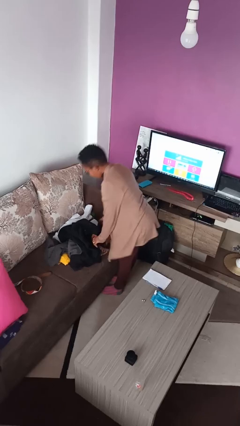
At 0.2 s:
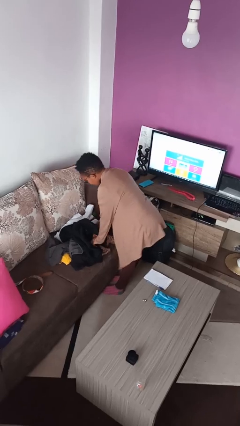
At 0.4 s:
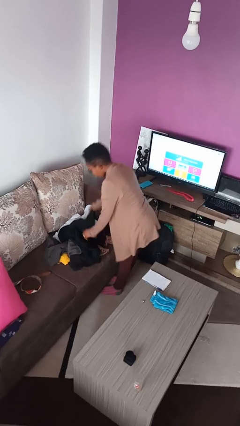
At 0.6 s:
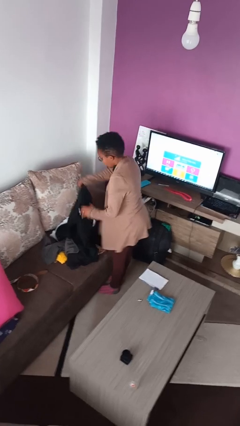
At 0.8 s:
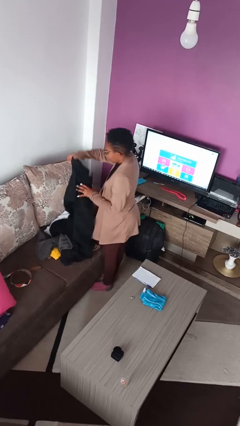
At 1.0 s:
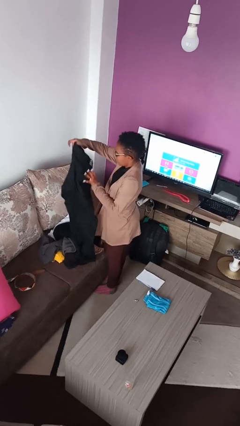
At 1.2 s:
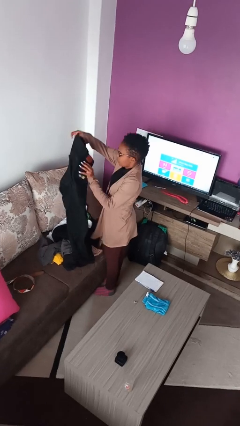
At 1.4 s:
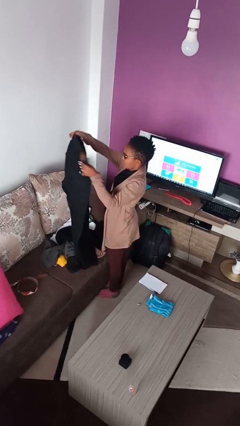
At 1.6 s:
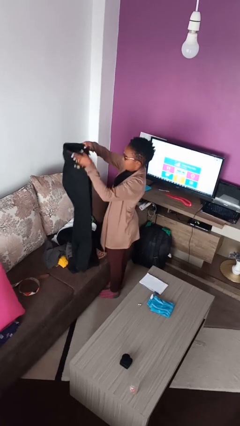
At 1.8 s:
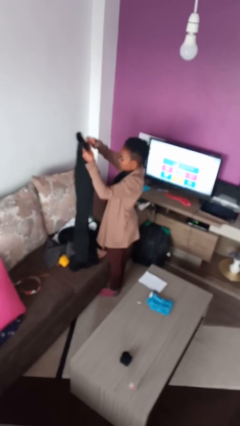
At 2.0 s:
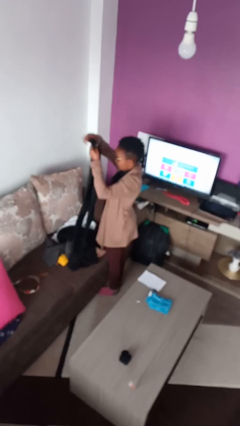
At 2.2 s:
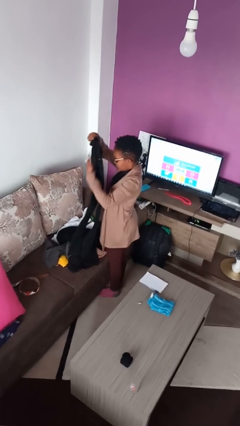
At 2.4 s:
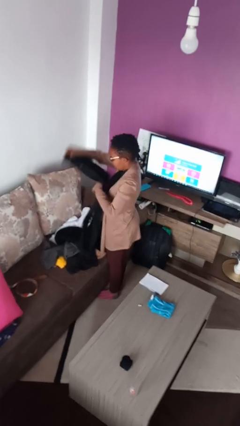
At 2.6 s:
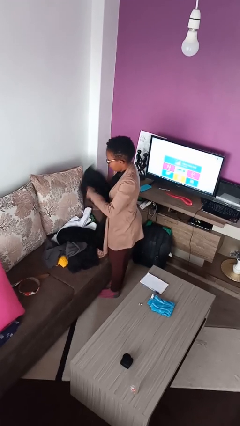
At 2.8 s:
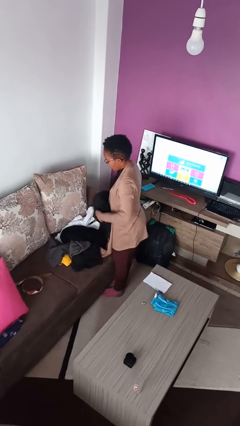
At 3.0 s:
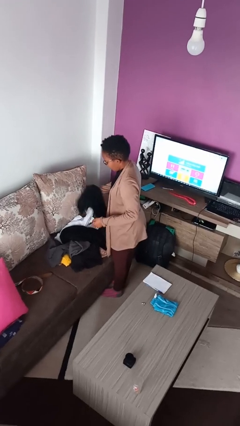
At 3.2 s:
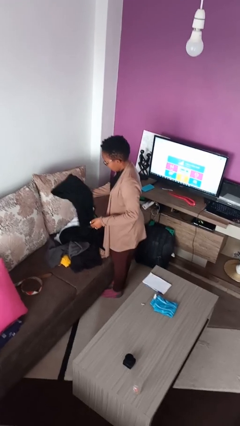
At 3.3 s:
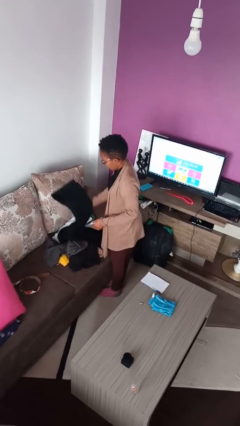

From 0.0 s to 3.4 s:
person folds pants

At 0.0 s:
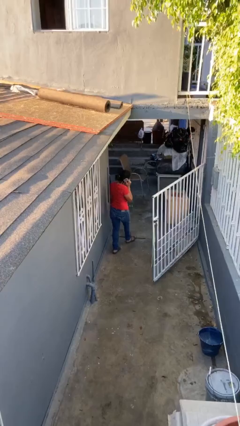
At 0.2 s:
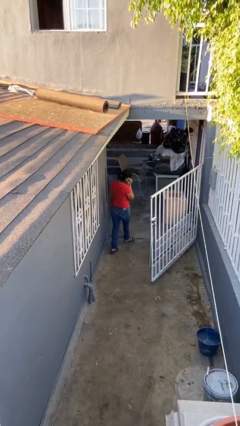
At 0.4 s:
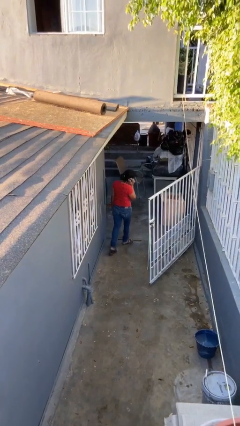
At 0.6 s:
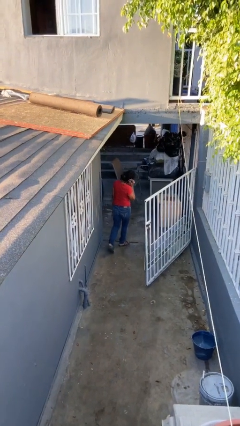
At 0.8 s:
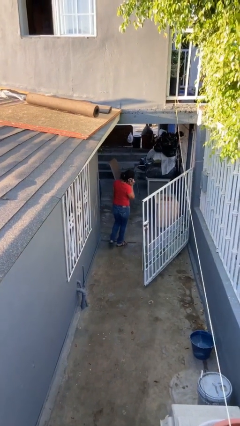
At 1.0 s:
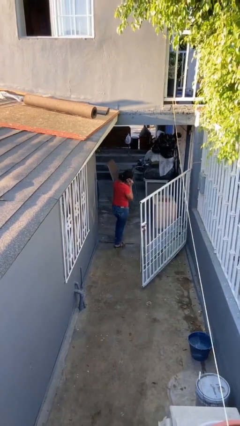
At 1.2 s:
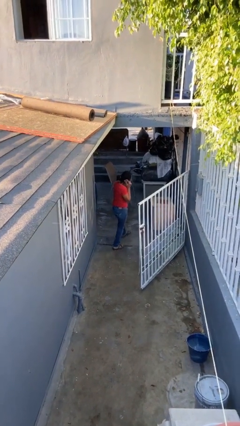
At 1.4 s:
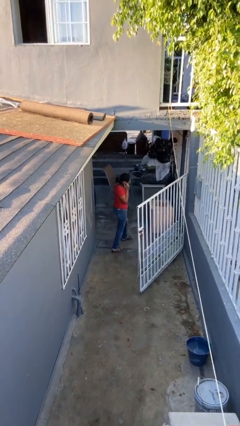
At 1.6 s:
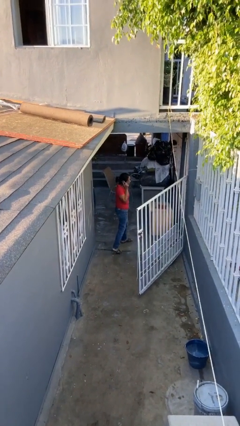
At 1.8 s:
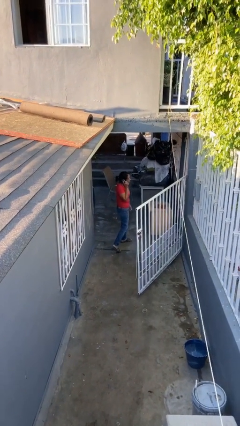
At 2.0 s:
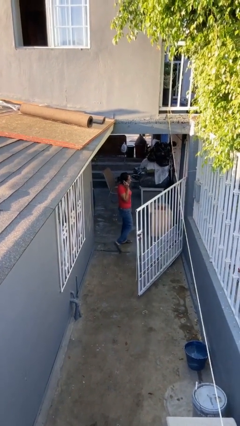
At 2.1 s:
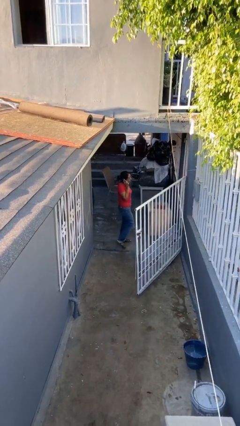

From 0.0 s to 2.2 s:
person exits scene through structure

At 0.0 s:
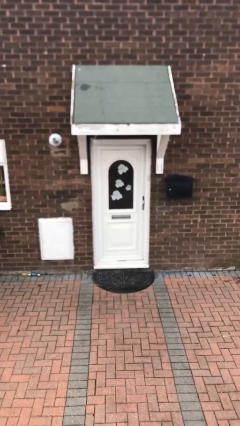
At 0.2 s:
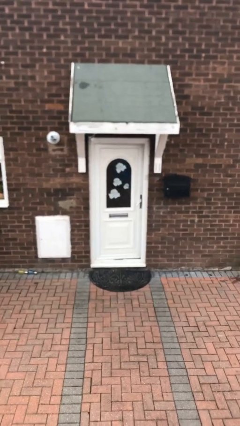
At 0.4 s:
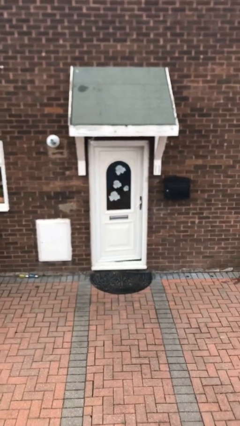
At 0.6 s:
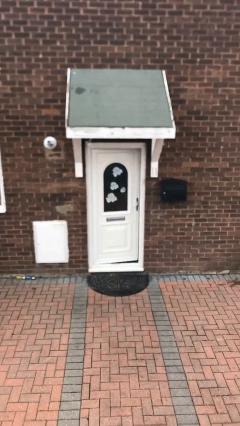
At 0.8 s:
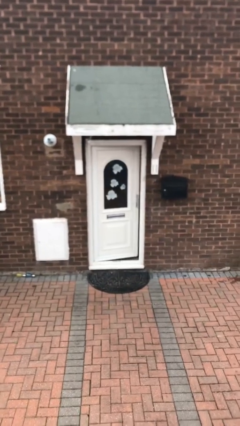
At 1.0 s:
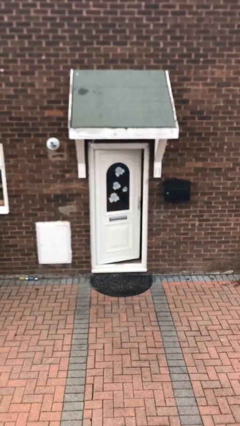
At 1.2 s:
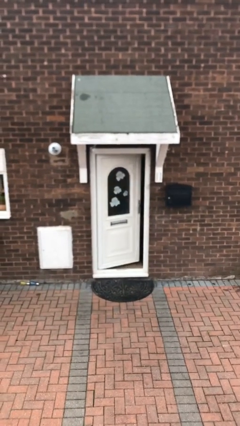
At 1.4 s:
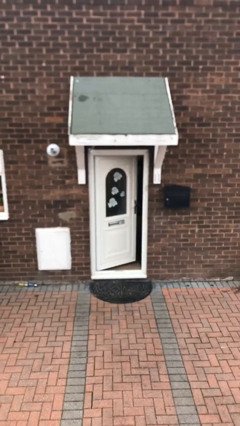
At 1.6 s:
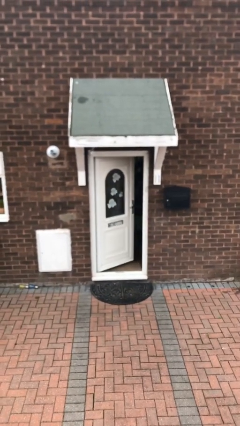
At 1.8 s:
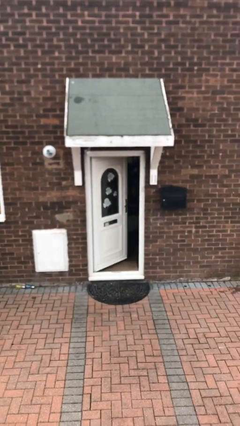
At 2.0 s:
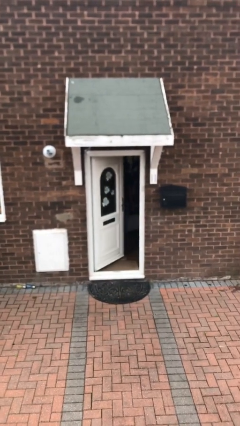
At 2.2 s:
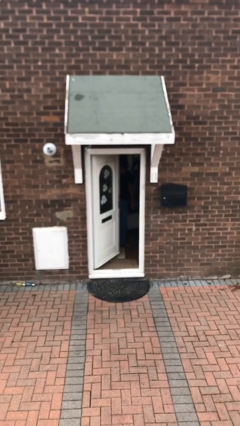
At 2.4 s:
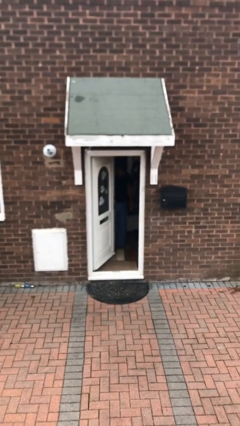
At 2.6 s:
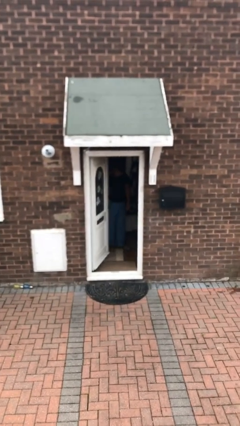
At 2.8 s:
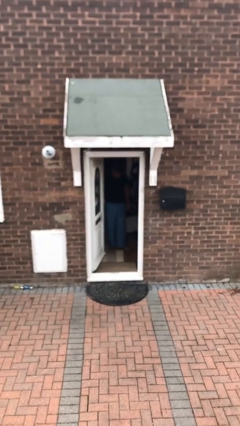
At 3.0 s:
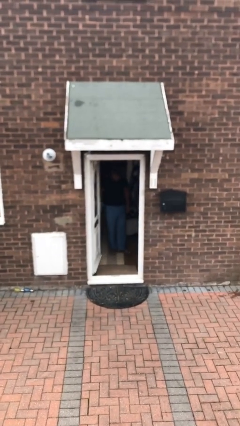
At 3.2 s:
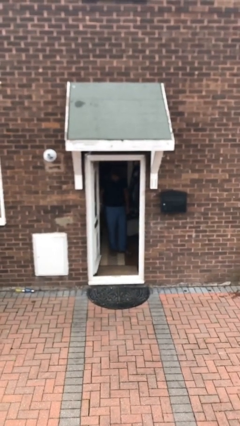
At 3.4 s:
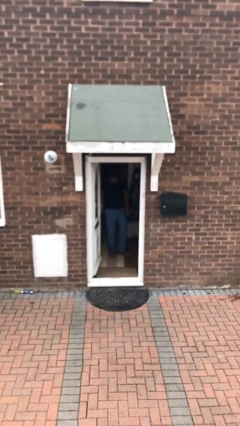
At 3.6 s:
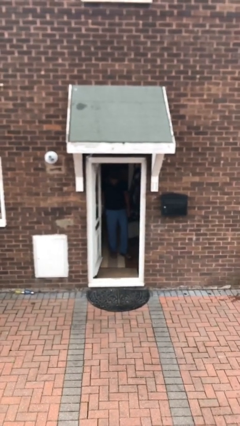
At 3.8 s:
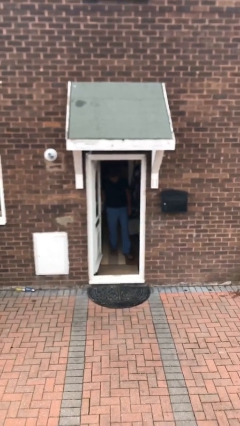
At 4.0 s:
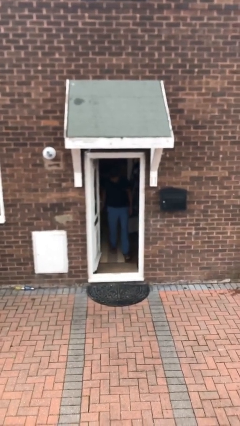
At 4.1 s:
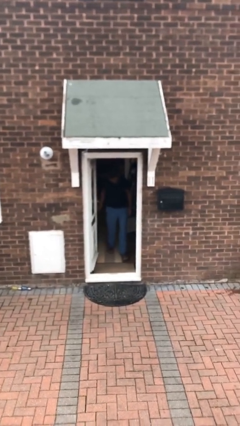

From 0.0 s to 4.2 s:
person opens facility door

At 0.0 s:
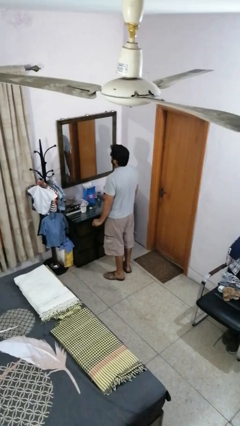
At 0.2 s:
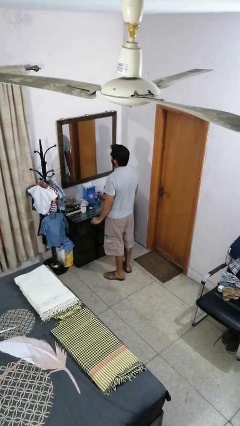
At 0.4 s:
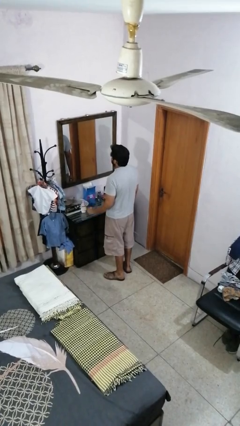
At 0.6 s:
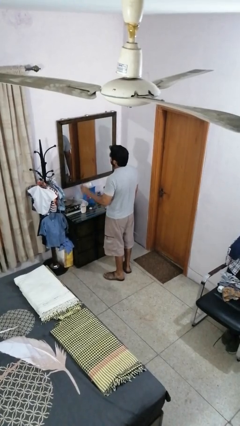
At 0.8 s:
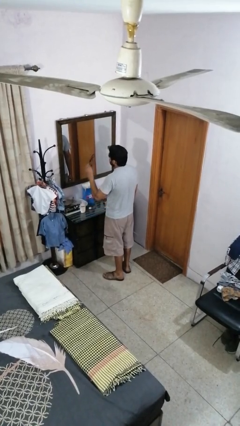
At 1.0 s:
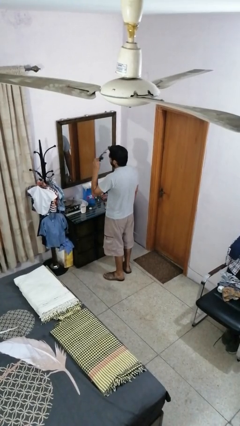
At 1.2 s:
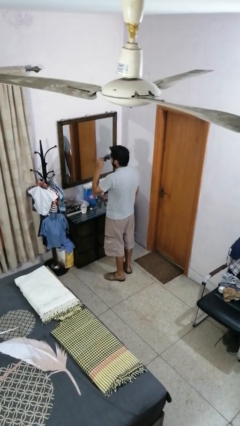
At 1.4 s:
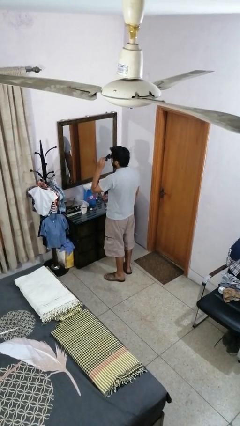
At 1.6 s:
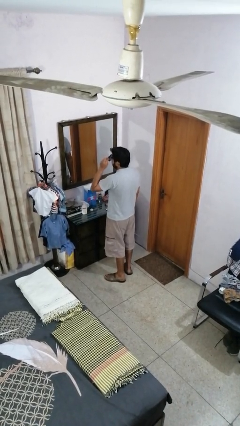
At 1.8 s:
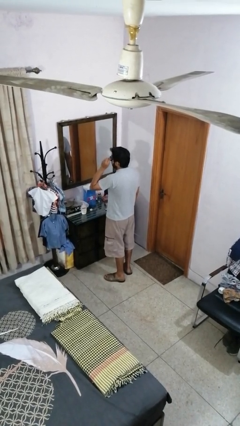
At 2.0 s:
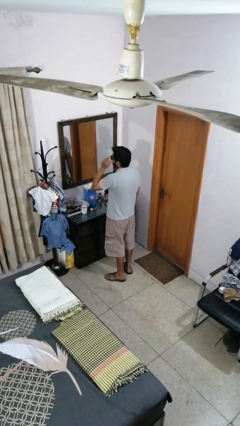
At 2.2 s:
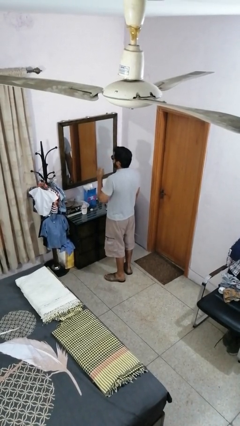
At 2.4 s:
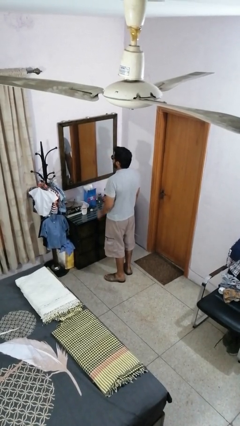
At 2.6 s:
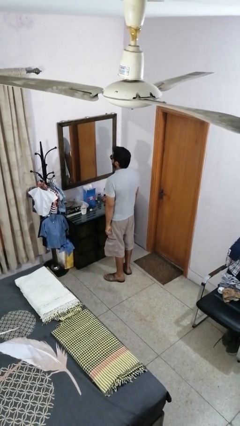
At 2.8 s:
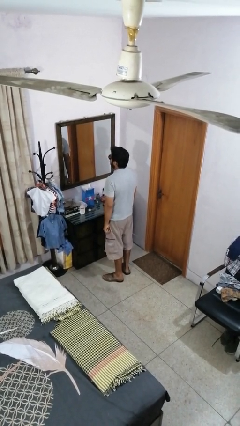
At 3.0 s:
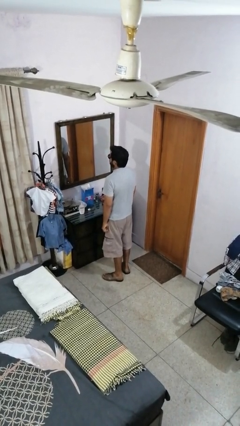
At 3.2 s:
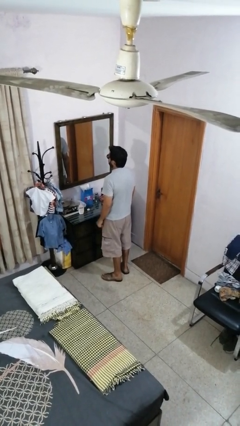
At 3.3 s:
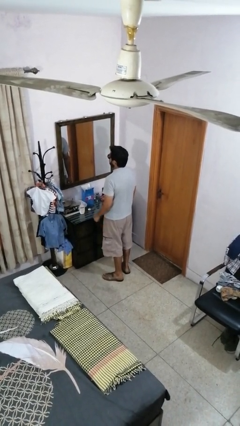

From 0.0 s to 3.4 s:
person puts on sunglasses

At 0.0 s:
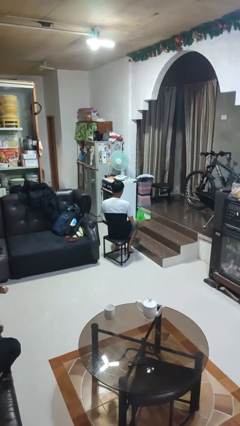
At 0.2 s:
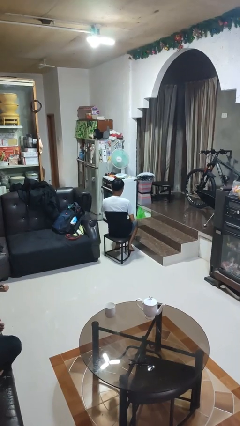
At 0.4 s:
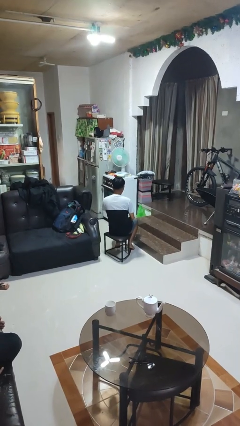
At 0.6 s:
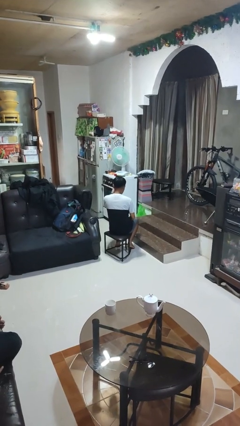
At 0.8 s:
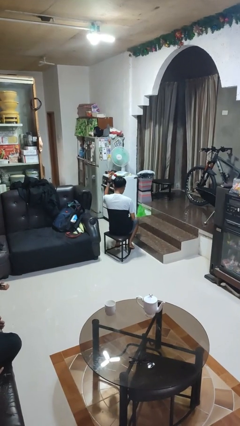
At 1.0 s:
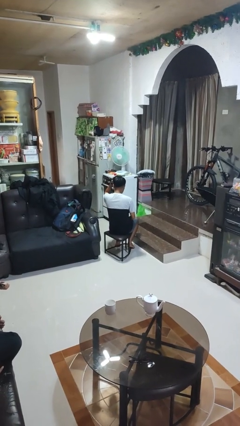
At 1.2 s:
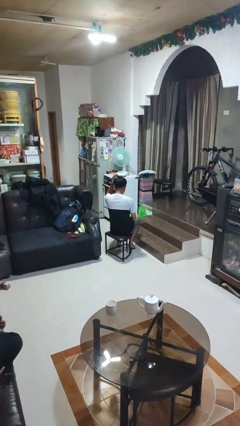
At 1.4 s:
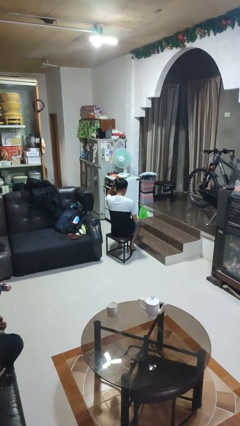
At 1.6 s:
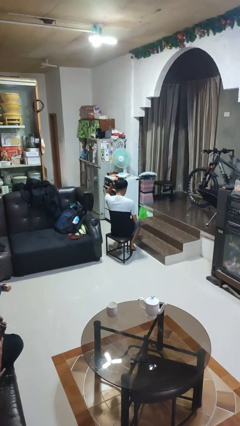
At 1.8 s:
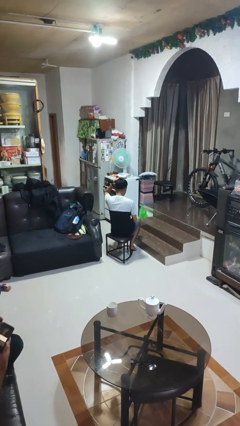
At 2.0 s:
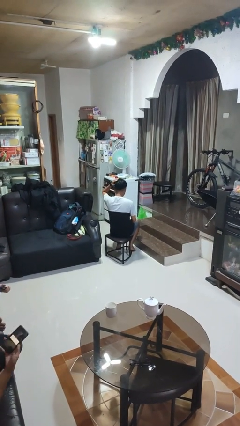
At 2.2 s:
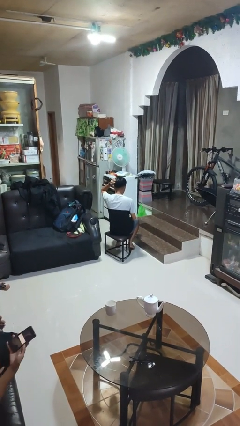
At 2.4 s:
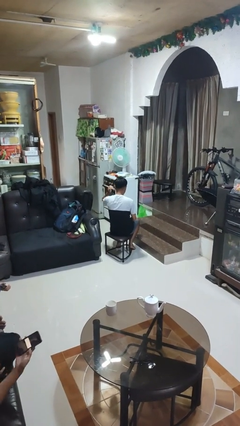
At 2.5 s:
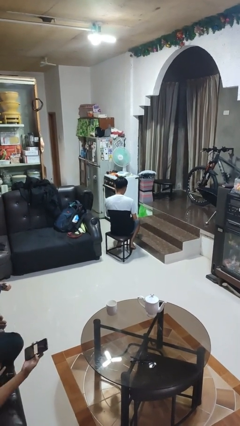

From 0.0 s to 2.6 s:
person pats head

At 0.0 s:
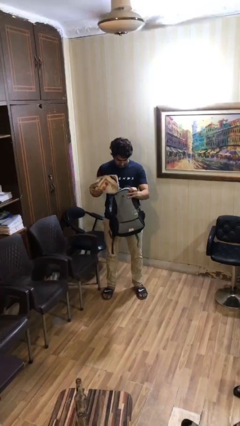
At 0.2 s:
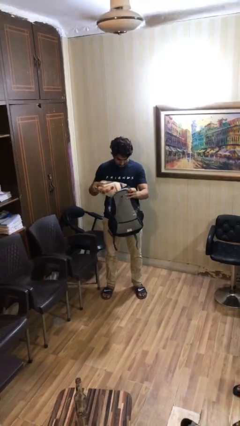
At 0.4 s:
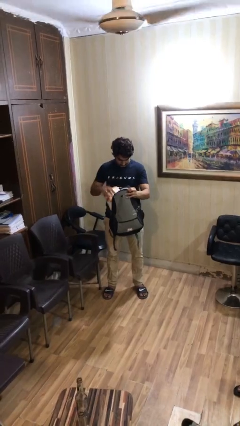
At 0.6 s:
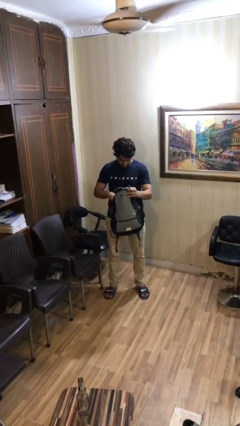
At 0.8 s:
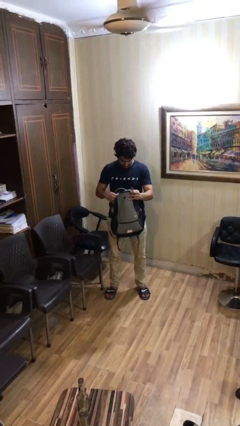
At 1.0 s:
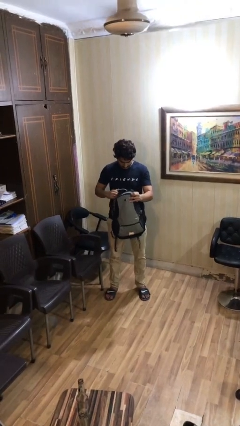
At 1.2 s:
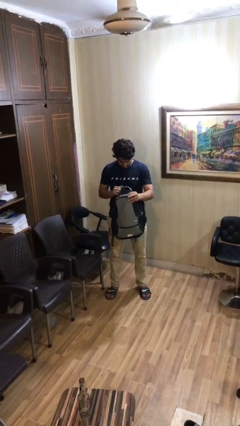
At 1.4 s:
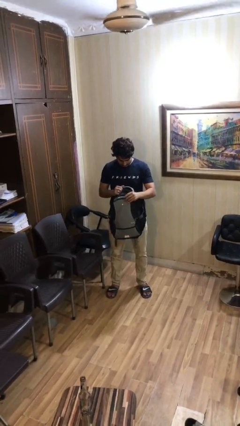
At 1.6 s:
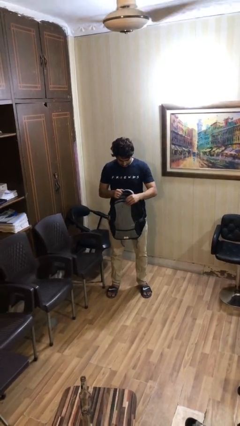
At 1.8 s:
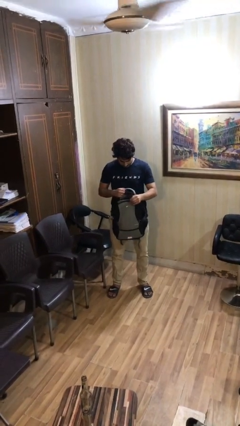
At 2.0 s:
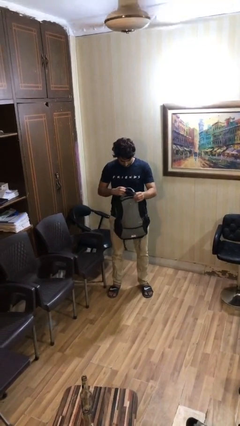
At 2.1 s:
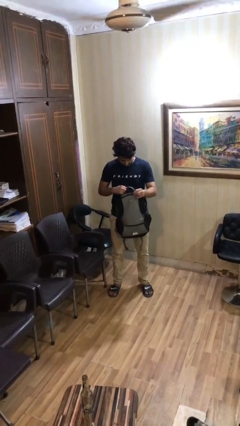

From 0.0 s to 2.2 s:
person puts object into backpack
